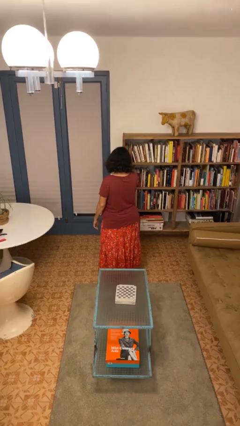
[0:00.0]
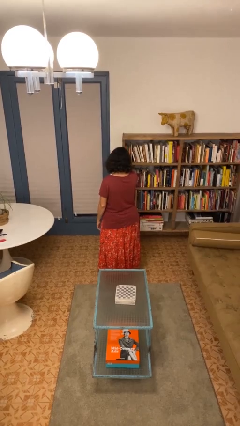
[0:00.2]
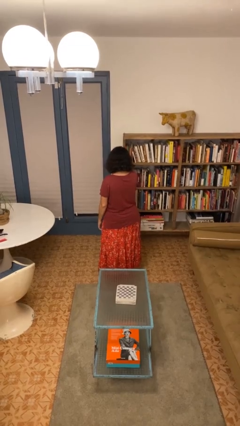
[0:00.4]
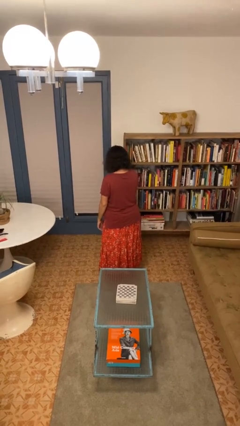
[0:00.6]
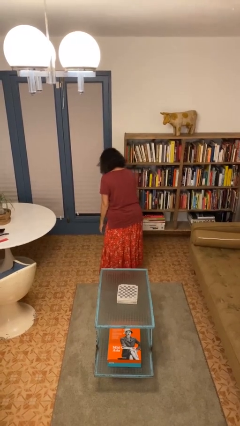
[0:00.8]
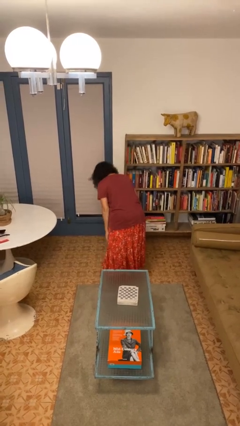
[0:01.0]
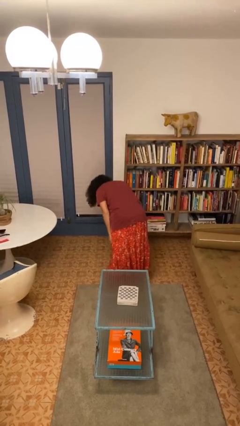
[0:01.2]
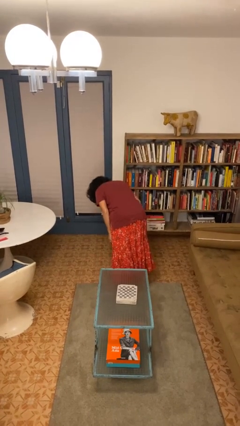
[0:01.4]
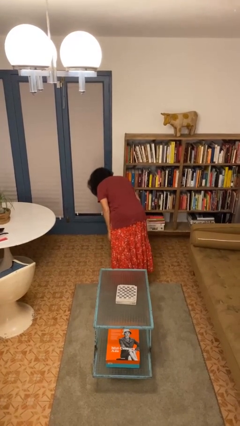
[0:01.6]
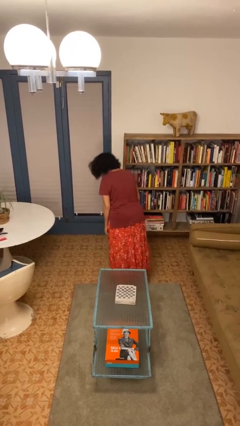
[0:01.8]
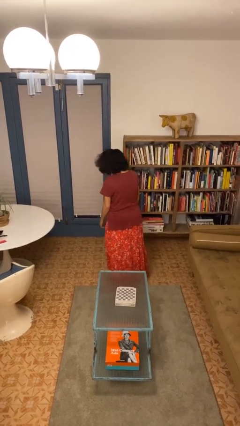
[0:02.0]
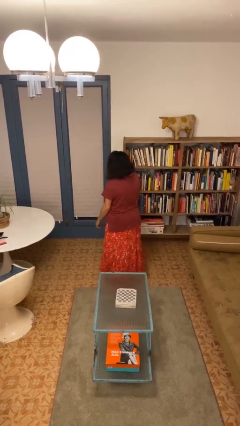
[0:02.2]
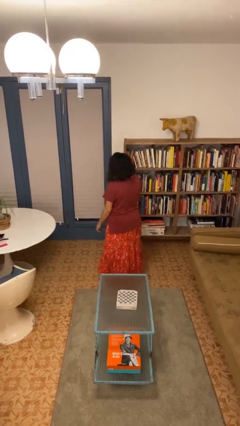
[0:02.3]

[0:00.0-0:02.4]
person bows

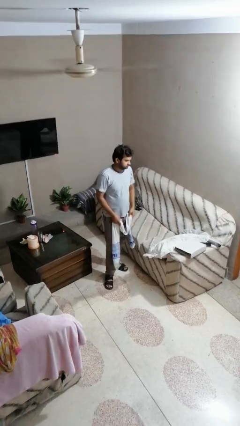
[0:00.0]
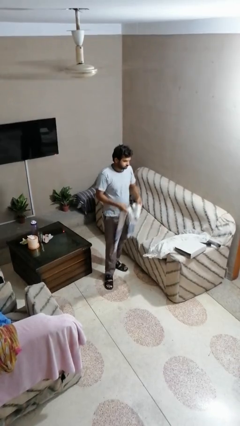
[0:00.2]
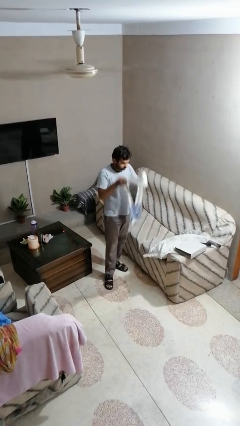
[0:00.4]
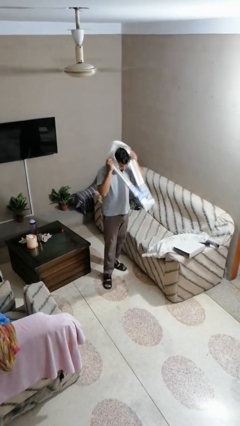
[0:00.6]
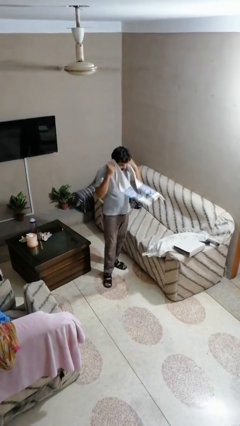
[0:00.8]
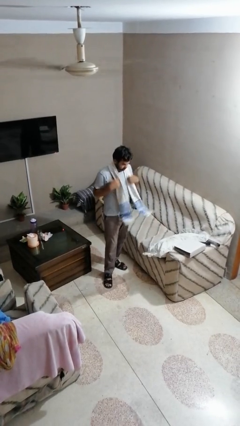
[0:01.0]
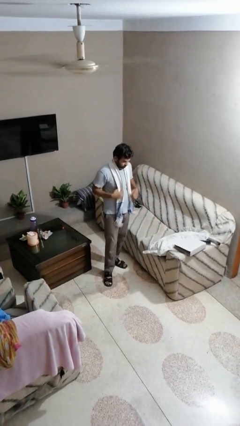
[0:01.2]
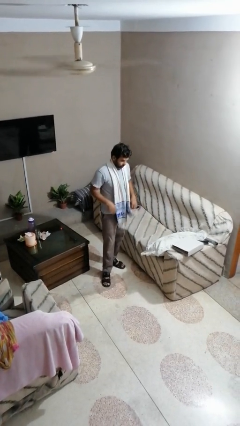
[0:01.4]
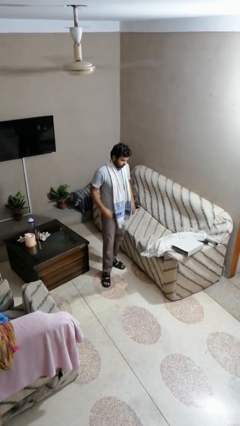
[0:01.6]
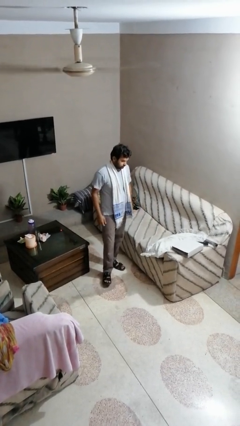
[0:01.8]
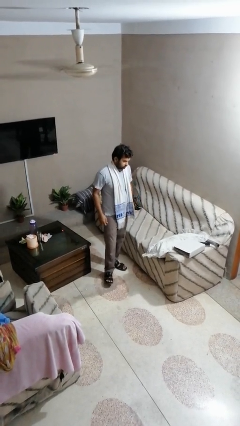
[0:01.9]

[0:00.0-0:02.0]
person puts on scarf

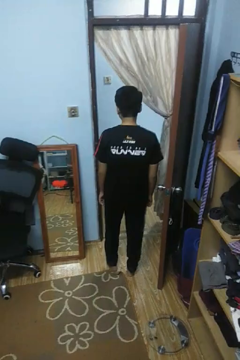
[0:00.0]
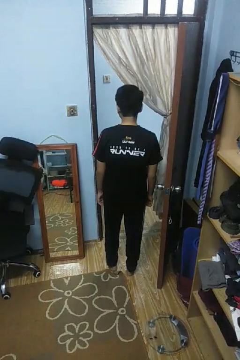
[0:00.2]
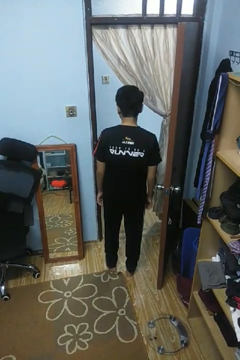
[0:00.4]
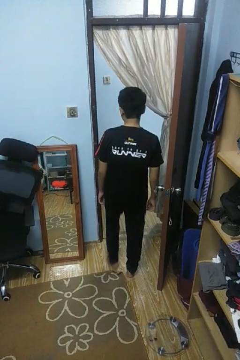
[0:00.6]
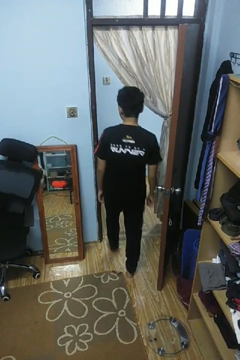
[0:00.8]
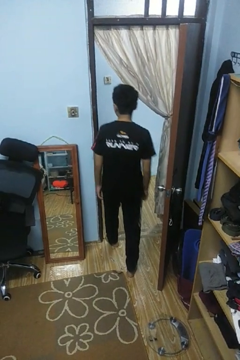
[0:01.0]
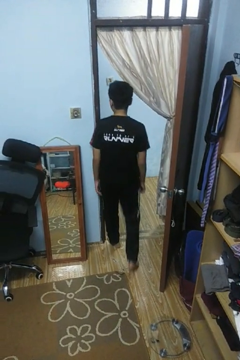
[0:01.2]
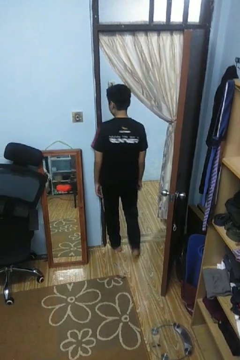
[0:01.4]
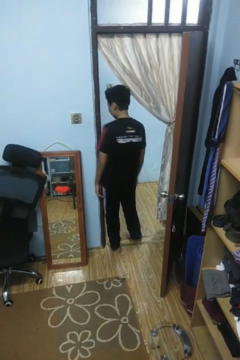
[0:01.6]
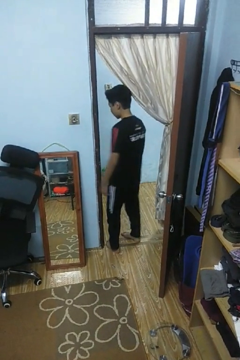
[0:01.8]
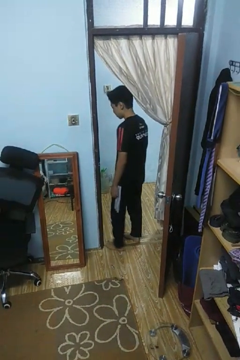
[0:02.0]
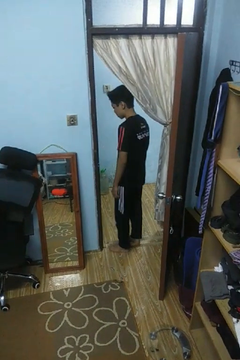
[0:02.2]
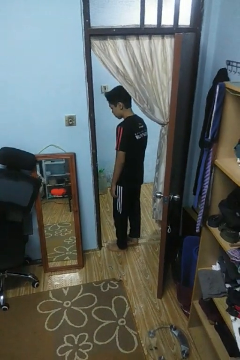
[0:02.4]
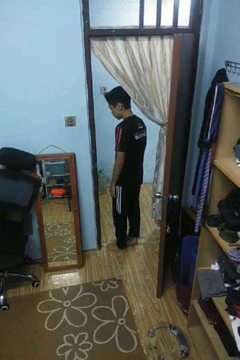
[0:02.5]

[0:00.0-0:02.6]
person bumps into wall

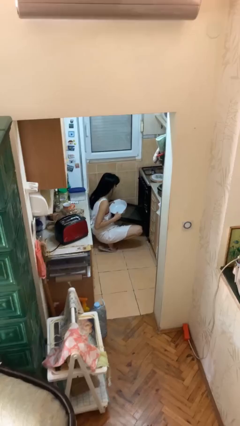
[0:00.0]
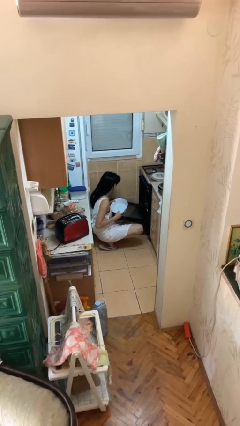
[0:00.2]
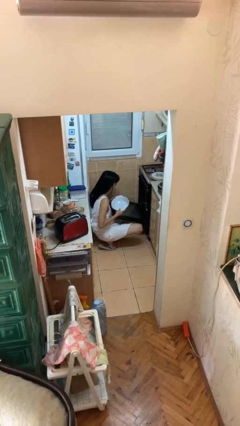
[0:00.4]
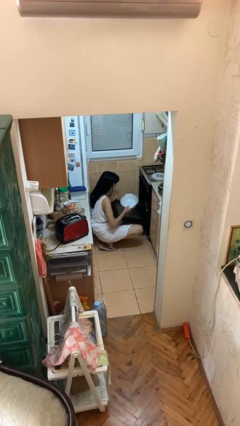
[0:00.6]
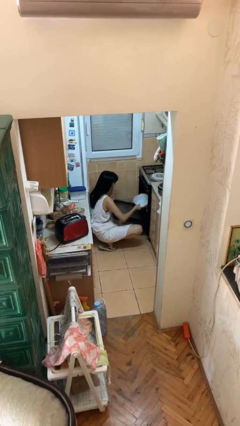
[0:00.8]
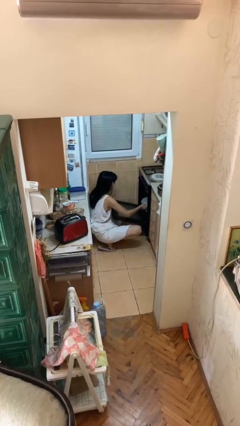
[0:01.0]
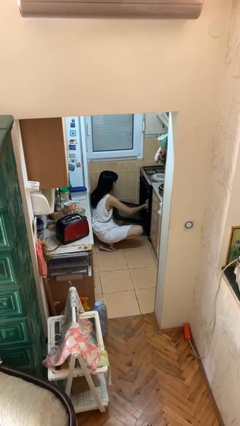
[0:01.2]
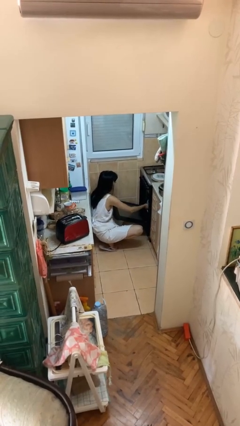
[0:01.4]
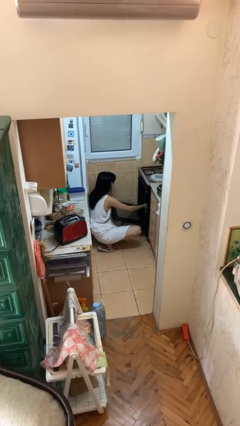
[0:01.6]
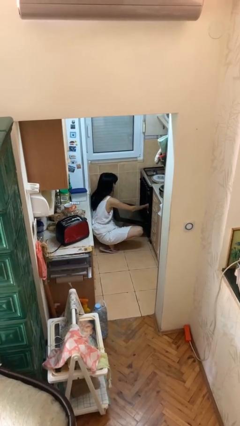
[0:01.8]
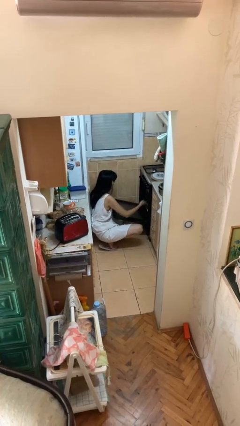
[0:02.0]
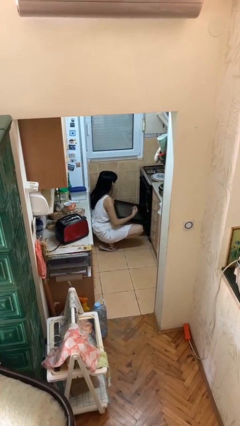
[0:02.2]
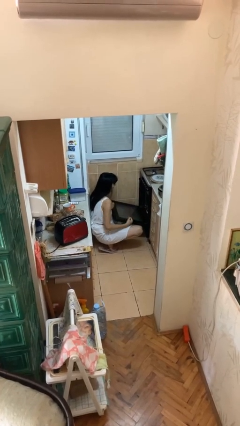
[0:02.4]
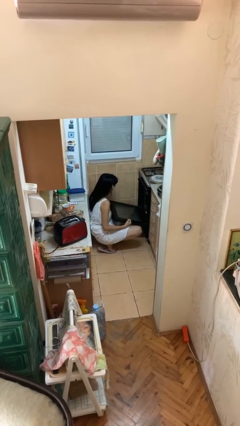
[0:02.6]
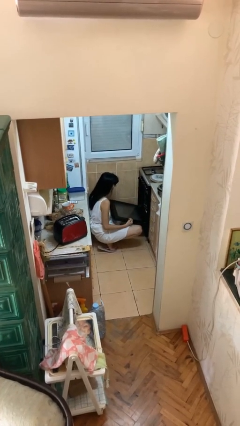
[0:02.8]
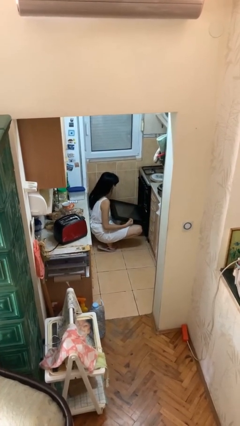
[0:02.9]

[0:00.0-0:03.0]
person puts object into oven

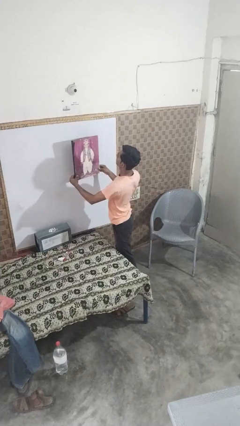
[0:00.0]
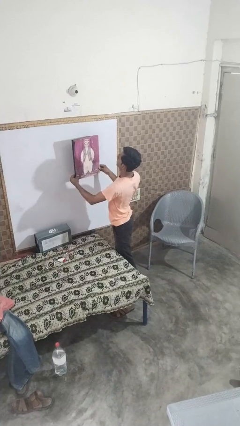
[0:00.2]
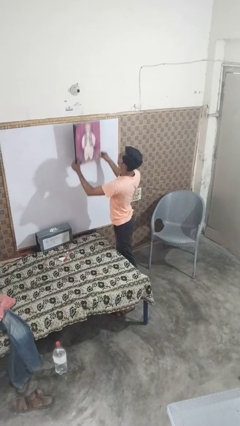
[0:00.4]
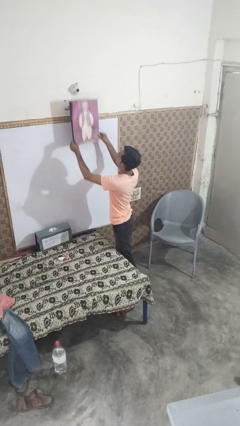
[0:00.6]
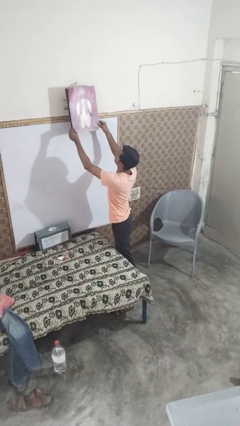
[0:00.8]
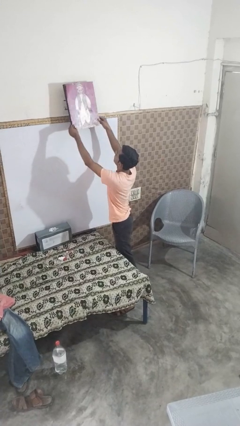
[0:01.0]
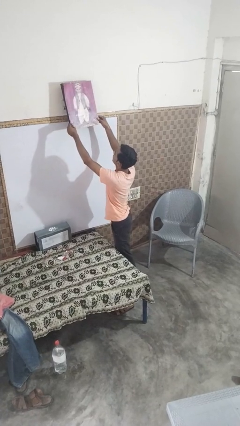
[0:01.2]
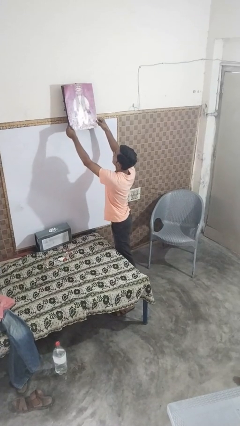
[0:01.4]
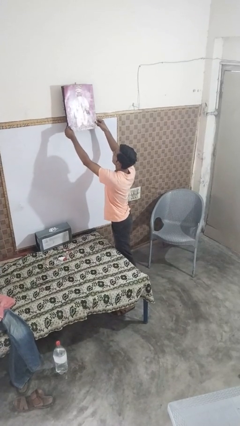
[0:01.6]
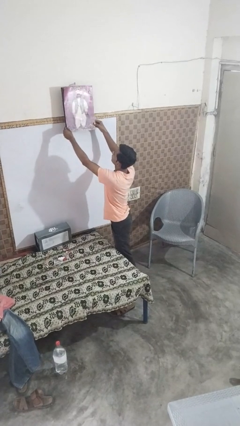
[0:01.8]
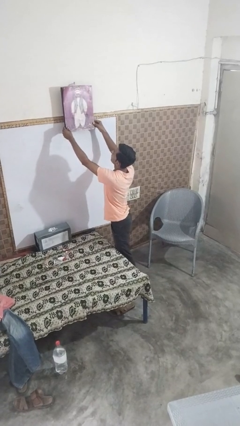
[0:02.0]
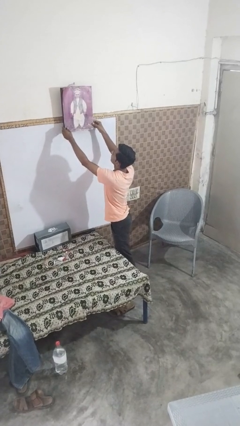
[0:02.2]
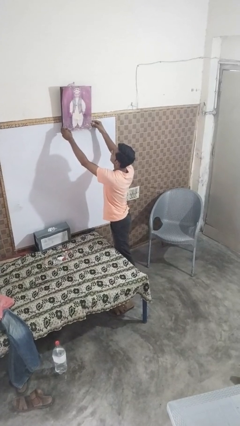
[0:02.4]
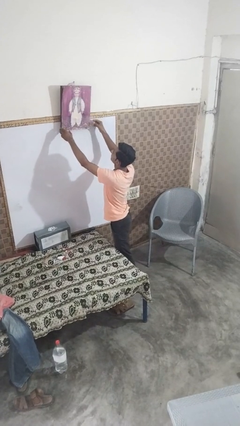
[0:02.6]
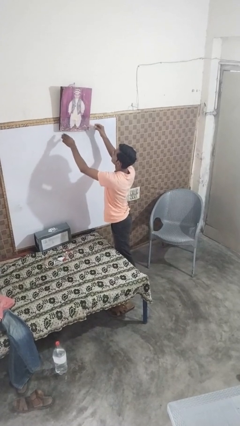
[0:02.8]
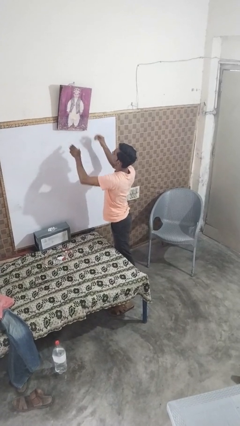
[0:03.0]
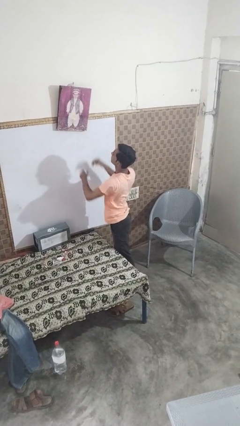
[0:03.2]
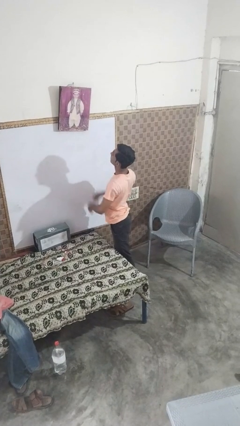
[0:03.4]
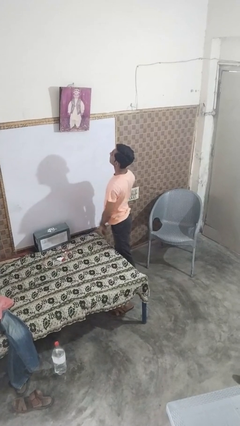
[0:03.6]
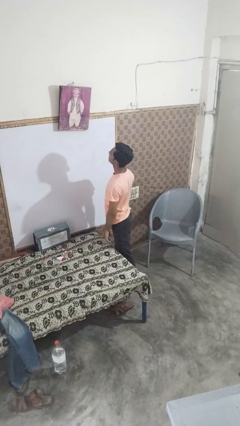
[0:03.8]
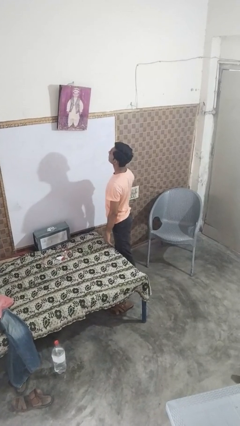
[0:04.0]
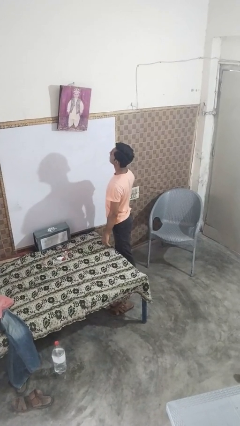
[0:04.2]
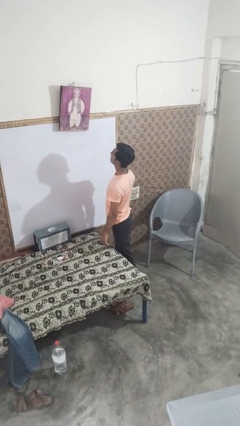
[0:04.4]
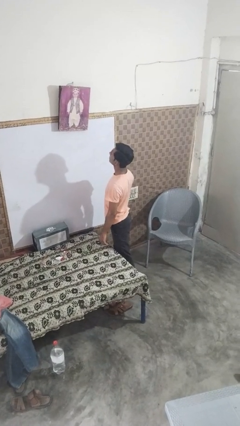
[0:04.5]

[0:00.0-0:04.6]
person puts up picture frame

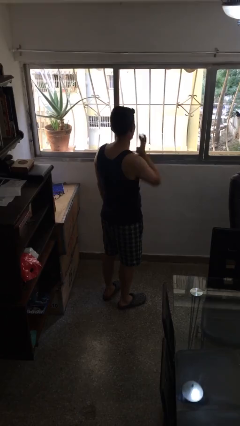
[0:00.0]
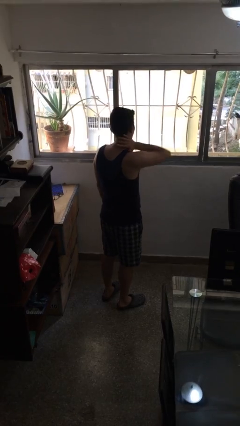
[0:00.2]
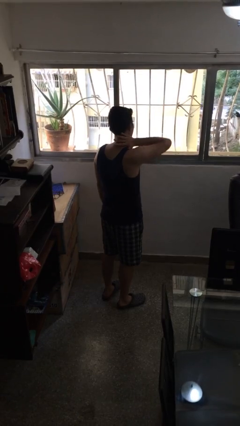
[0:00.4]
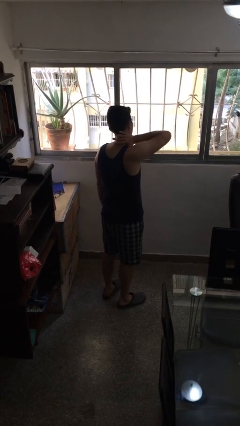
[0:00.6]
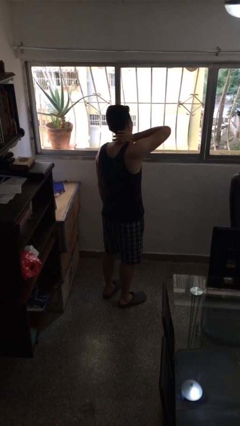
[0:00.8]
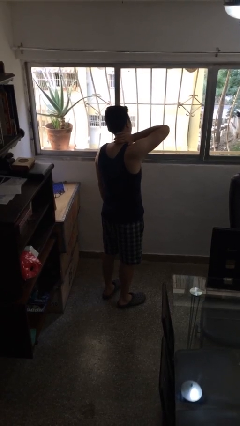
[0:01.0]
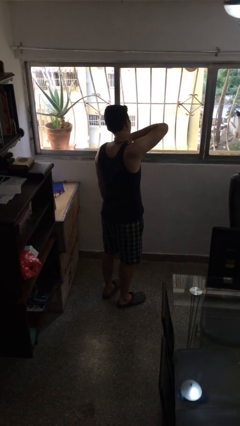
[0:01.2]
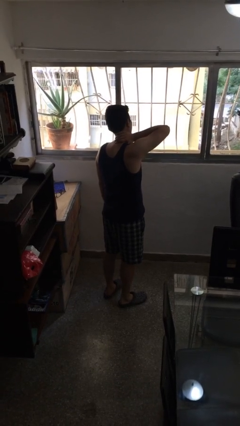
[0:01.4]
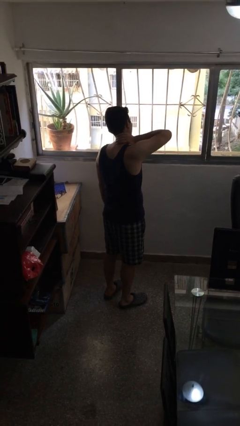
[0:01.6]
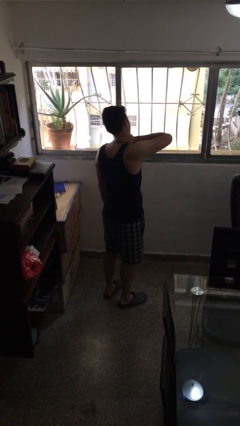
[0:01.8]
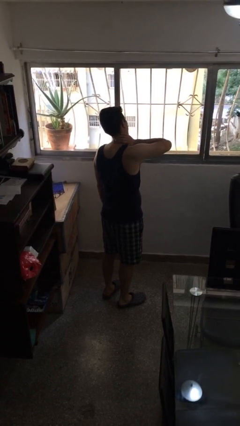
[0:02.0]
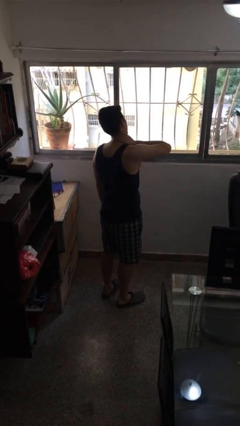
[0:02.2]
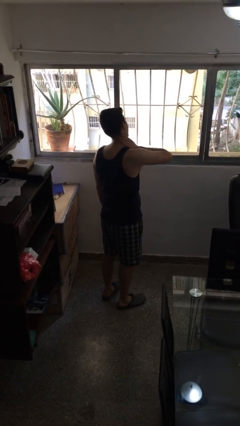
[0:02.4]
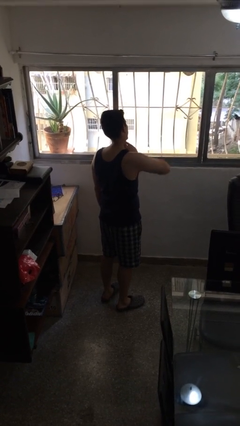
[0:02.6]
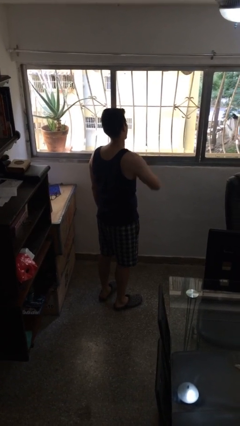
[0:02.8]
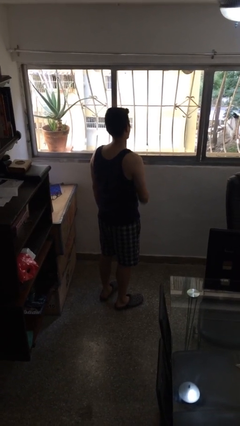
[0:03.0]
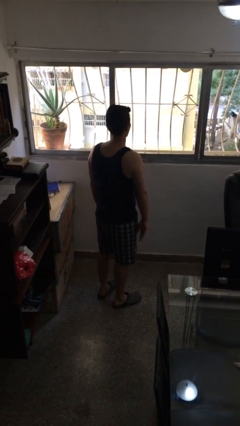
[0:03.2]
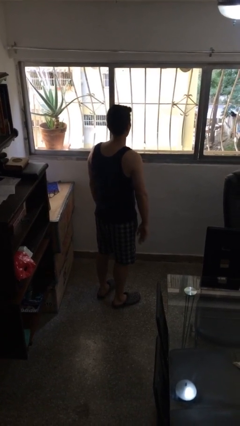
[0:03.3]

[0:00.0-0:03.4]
person rubs neck
